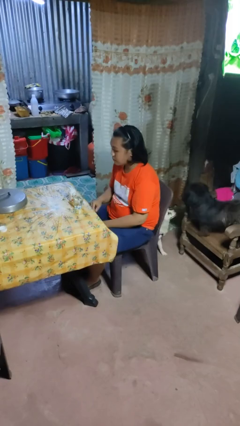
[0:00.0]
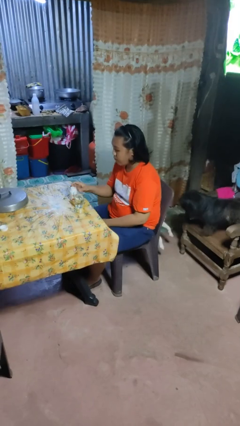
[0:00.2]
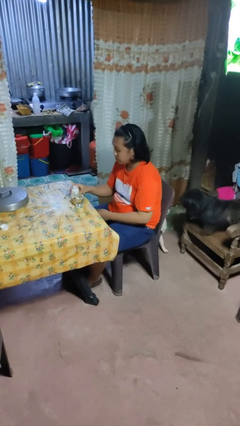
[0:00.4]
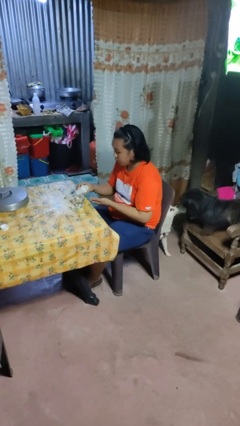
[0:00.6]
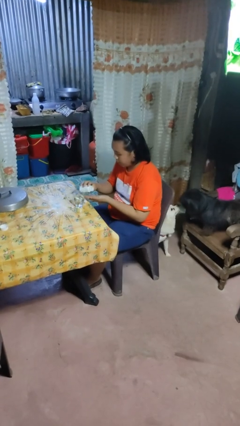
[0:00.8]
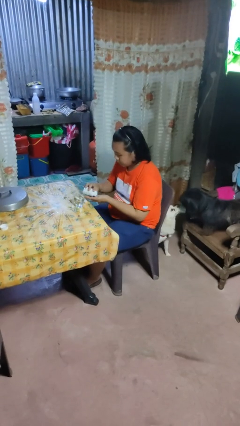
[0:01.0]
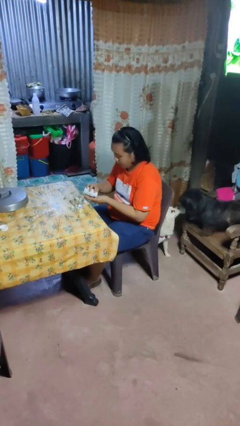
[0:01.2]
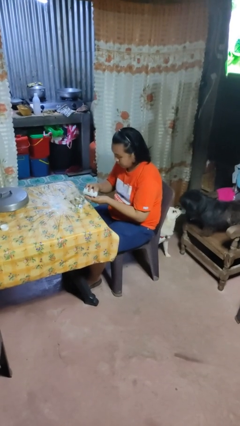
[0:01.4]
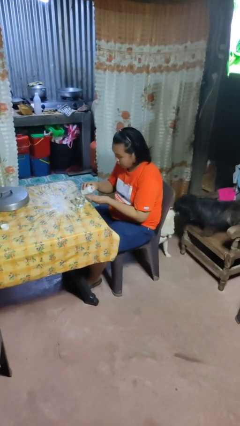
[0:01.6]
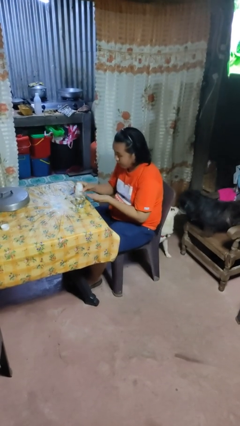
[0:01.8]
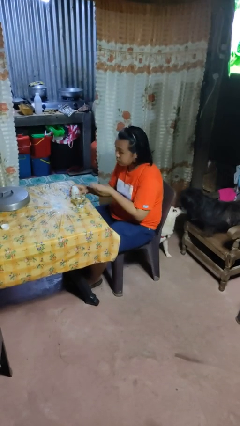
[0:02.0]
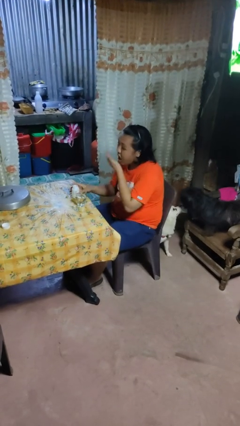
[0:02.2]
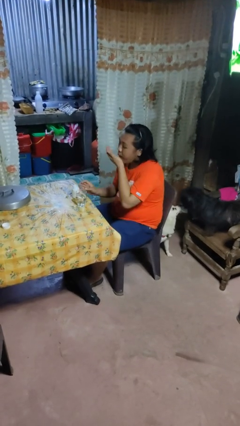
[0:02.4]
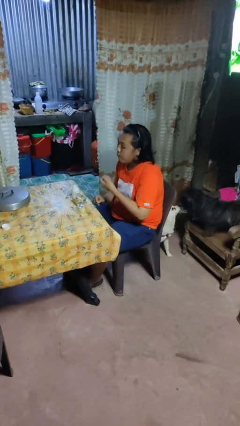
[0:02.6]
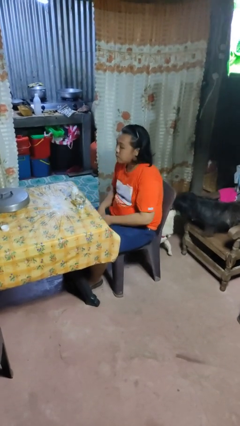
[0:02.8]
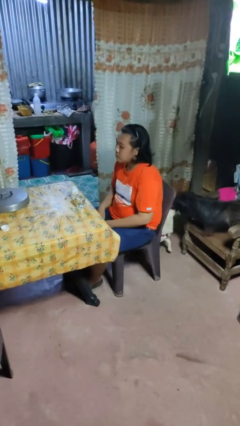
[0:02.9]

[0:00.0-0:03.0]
person takes medicine pills

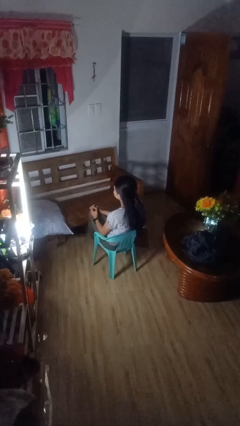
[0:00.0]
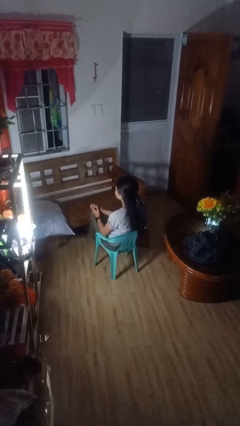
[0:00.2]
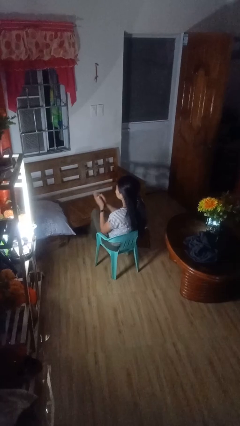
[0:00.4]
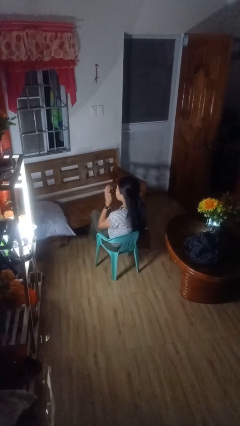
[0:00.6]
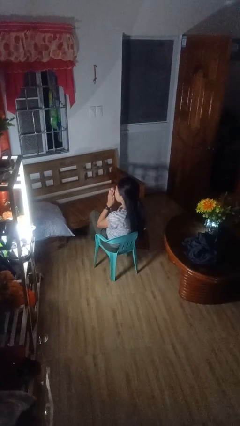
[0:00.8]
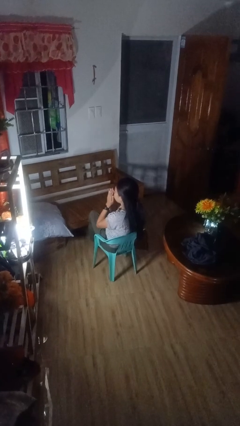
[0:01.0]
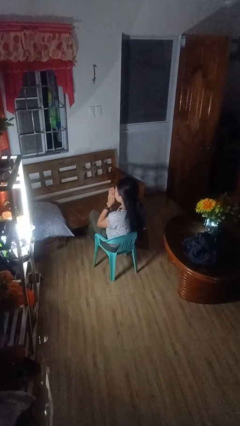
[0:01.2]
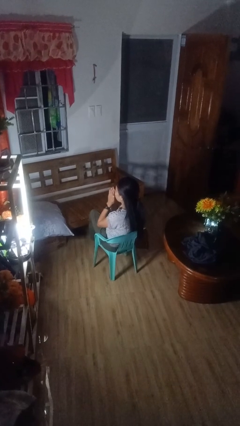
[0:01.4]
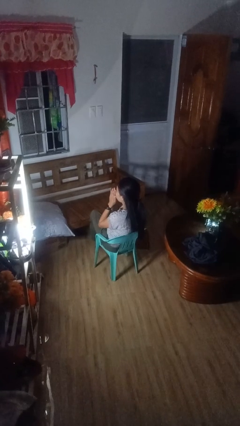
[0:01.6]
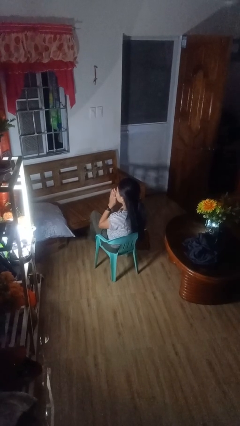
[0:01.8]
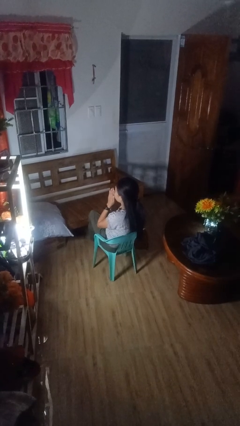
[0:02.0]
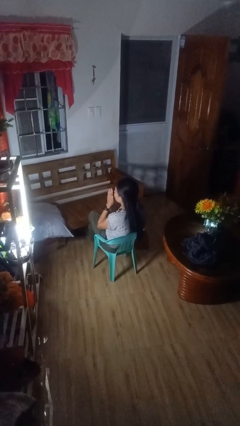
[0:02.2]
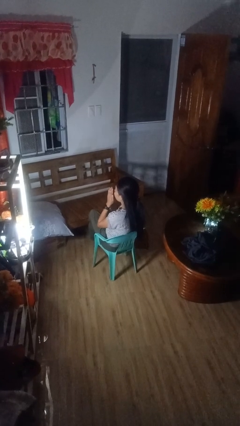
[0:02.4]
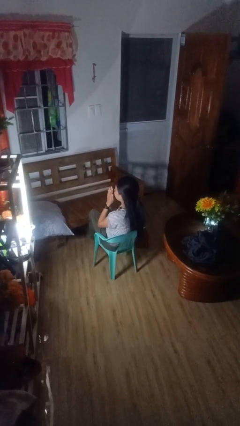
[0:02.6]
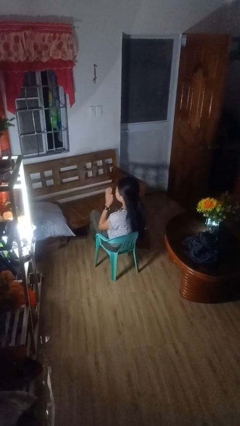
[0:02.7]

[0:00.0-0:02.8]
person blows into hands

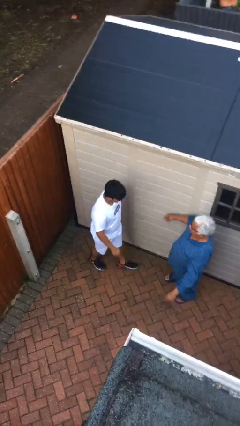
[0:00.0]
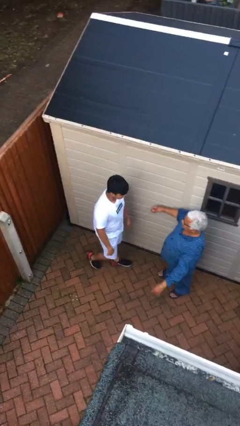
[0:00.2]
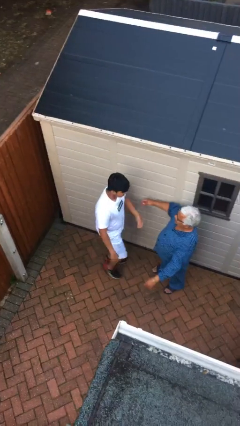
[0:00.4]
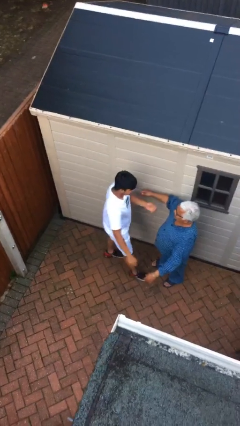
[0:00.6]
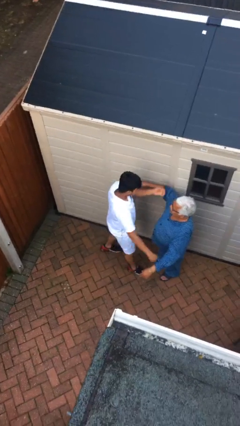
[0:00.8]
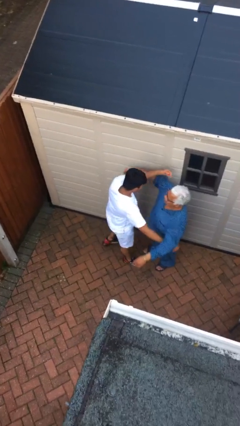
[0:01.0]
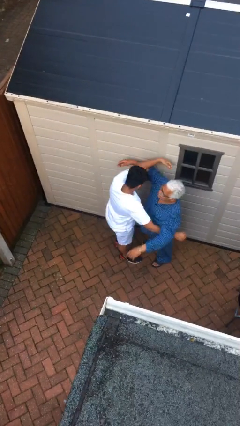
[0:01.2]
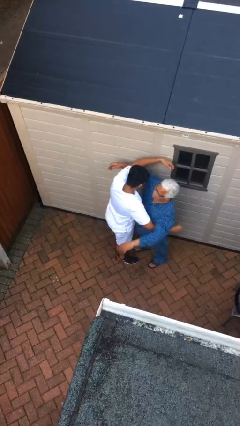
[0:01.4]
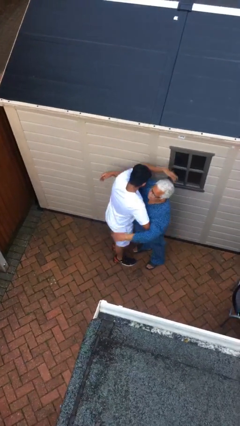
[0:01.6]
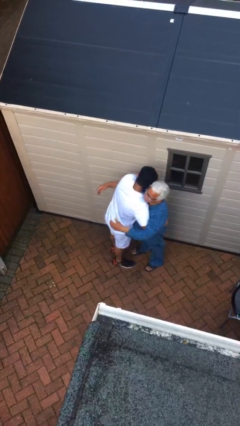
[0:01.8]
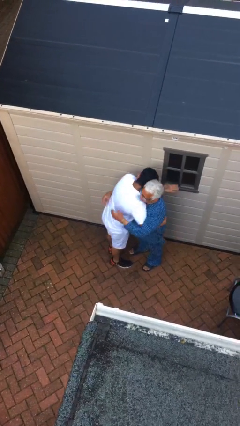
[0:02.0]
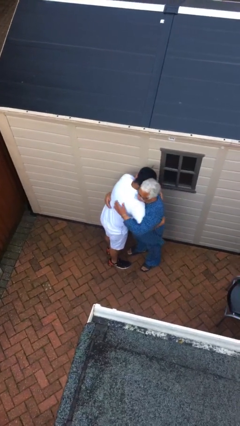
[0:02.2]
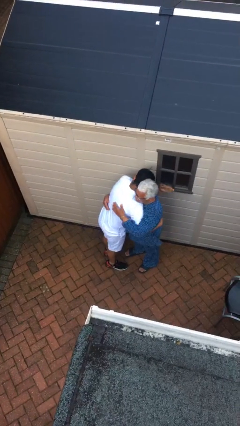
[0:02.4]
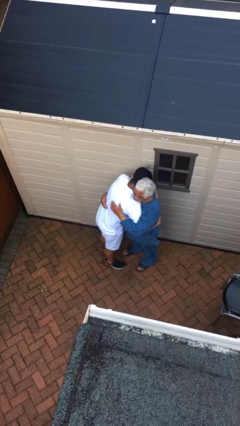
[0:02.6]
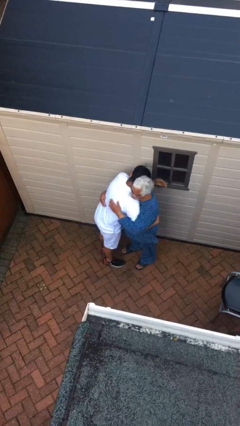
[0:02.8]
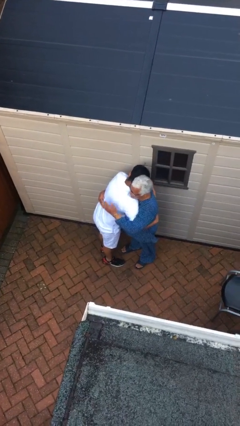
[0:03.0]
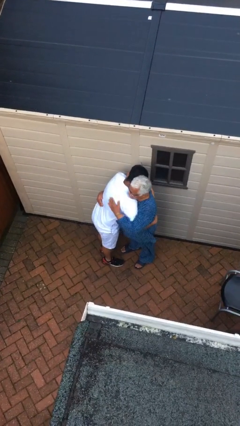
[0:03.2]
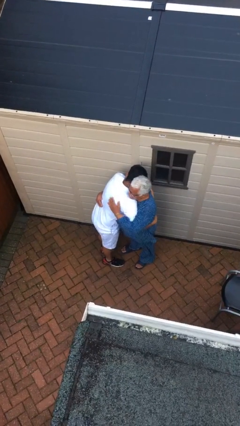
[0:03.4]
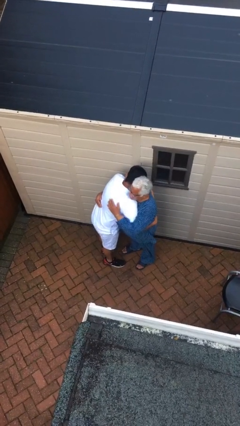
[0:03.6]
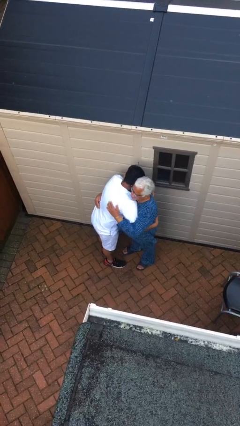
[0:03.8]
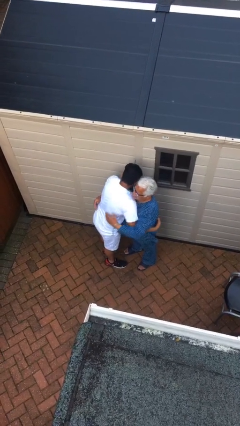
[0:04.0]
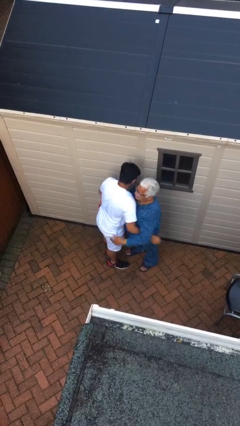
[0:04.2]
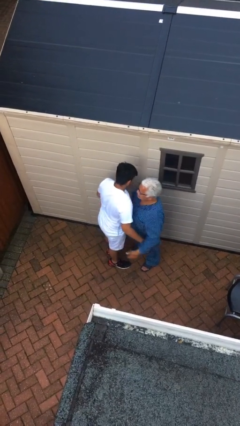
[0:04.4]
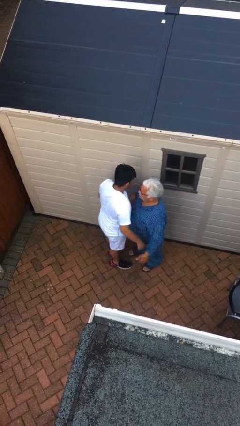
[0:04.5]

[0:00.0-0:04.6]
person embraces person

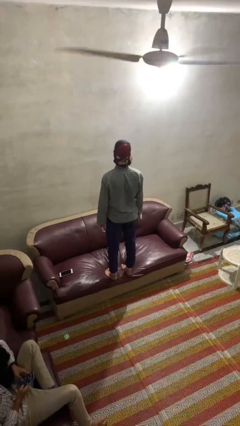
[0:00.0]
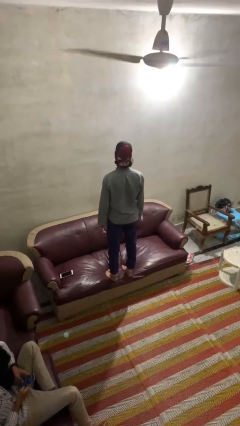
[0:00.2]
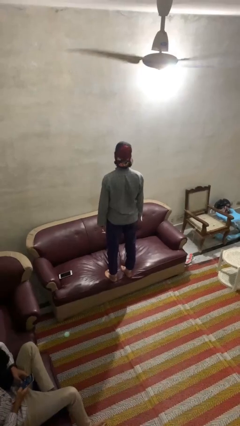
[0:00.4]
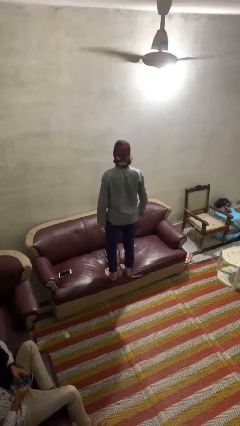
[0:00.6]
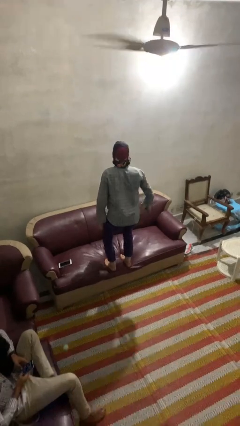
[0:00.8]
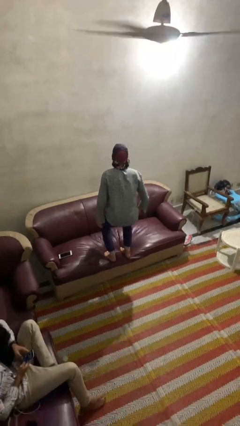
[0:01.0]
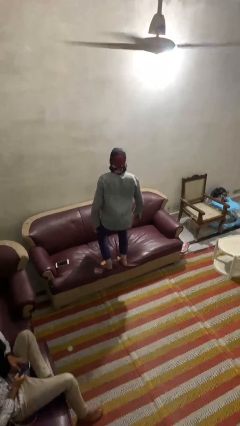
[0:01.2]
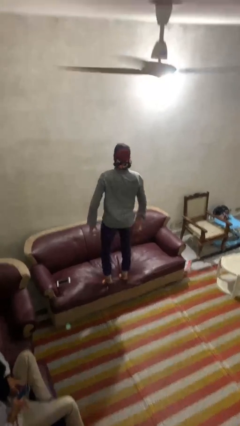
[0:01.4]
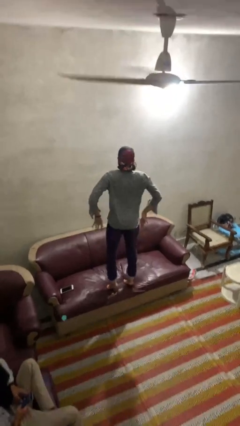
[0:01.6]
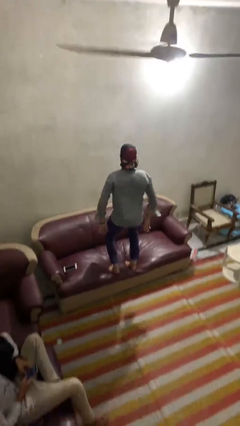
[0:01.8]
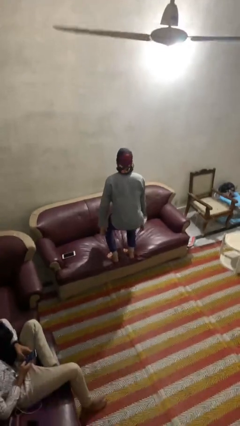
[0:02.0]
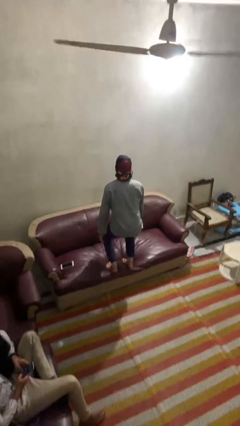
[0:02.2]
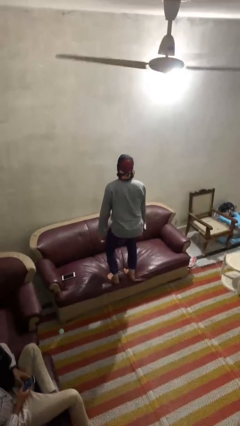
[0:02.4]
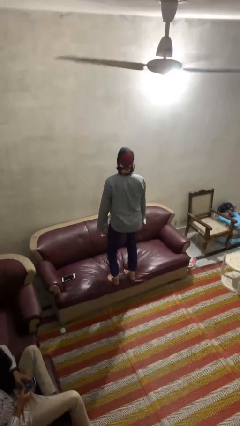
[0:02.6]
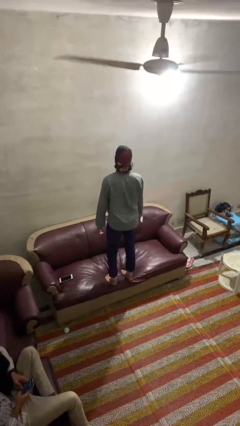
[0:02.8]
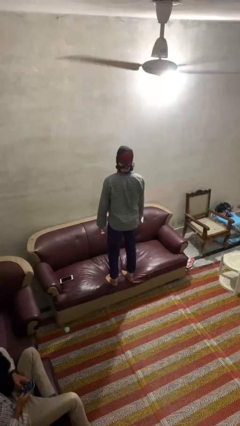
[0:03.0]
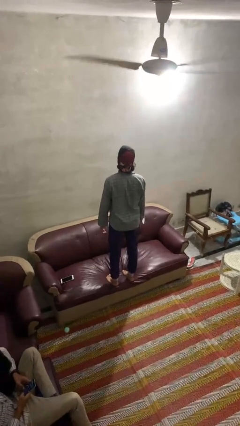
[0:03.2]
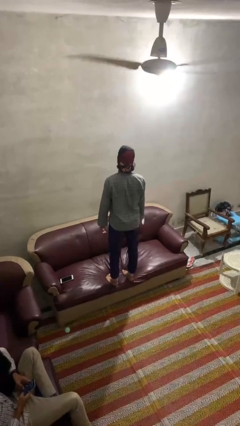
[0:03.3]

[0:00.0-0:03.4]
person jumps on couch

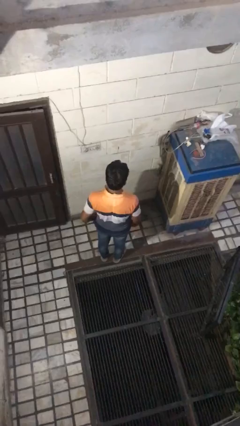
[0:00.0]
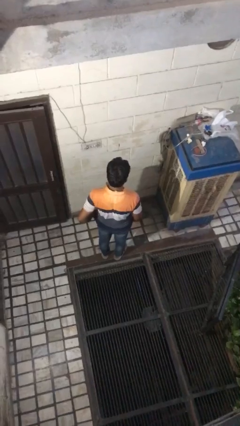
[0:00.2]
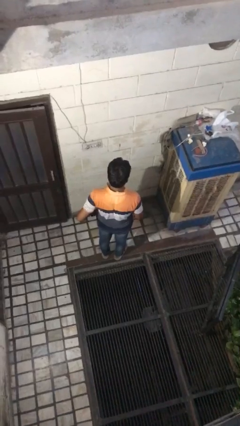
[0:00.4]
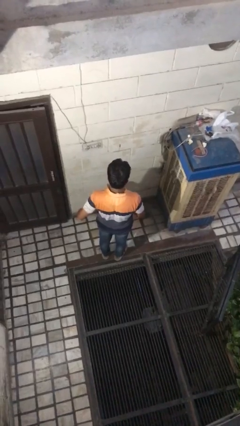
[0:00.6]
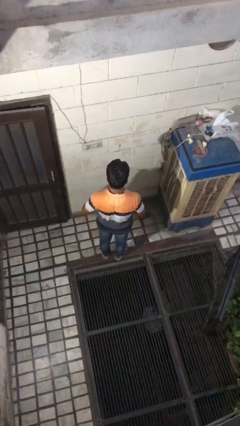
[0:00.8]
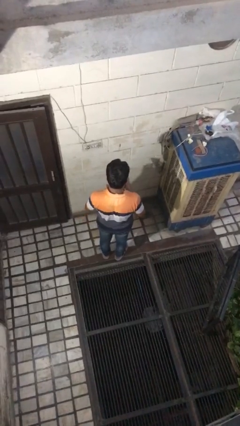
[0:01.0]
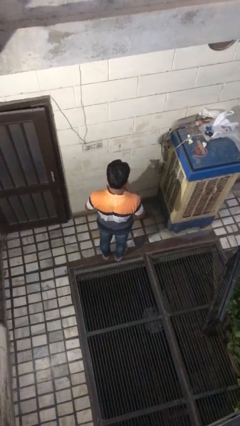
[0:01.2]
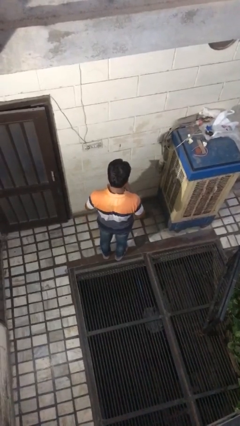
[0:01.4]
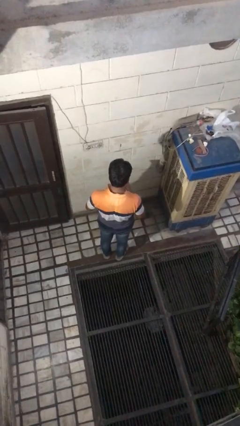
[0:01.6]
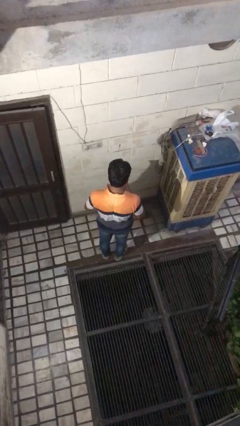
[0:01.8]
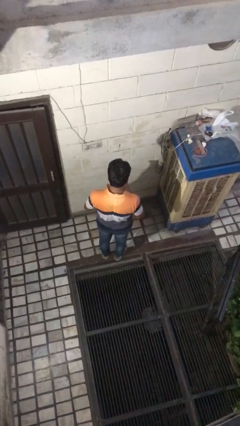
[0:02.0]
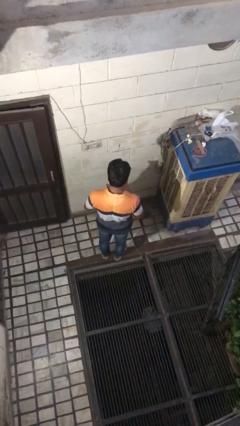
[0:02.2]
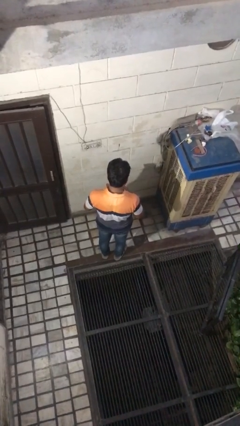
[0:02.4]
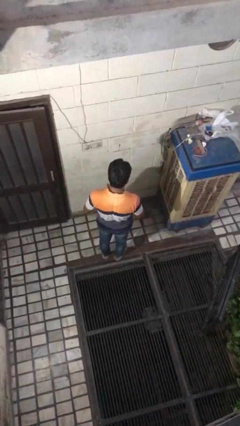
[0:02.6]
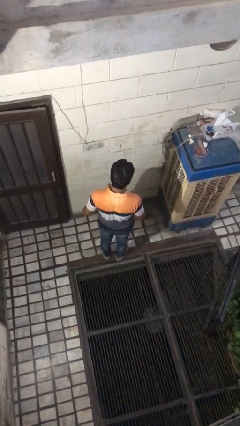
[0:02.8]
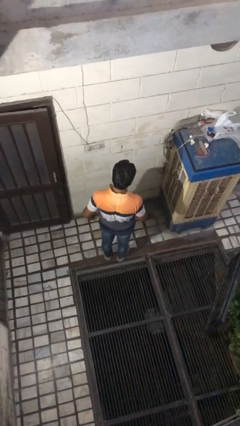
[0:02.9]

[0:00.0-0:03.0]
person takes phone from pocket

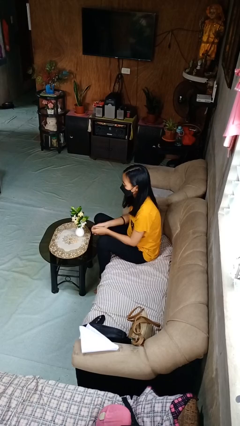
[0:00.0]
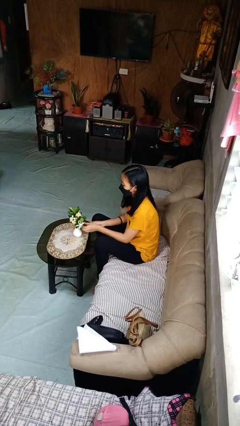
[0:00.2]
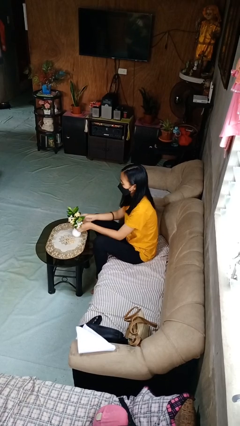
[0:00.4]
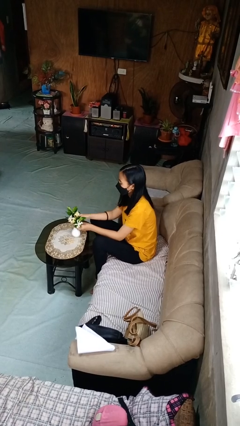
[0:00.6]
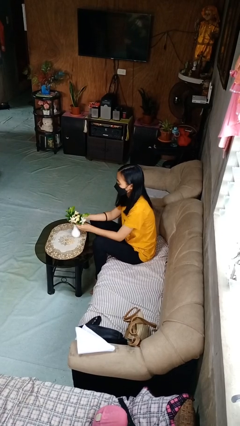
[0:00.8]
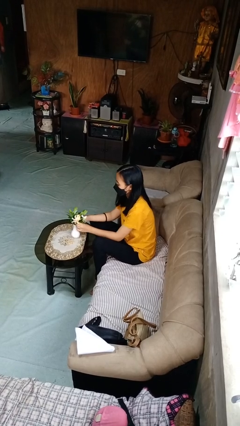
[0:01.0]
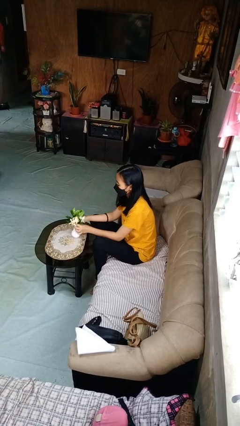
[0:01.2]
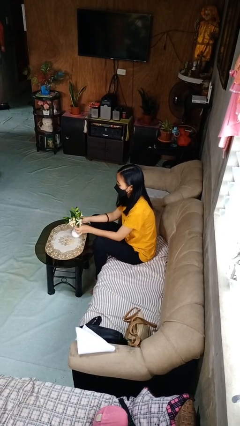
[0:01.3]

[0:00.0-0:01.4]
person arranges flowers in vase
